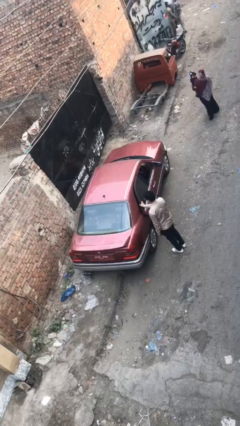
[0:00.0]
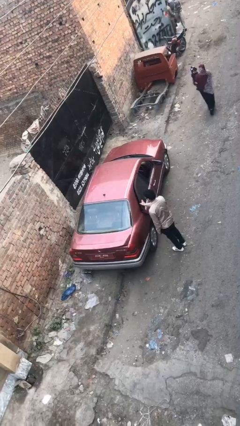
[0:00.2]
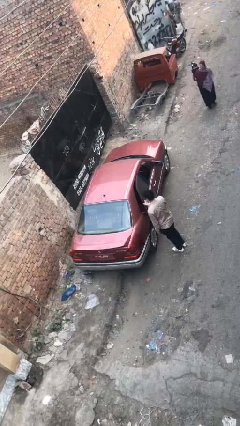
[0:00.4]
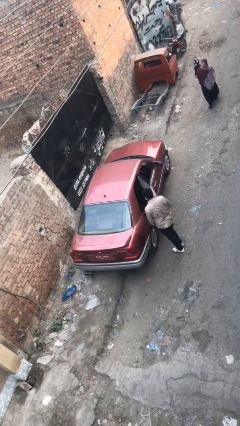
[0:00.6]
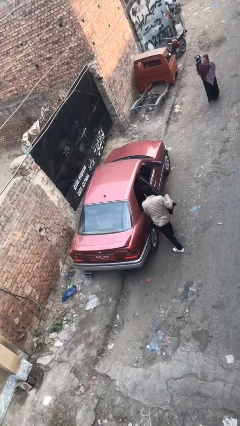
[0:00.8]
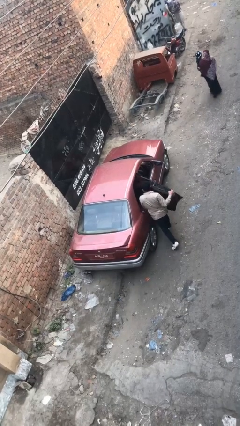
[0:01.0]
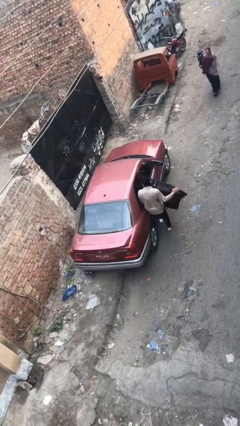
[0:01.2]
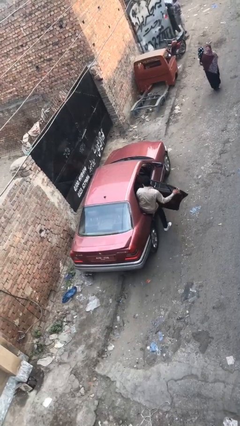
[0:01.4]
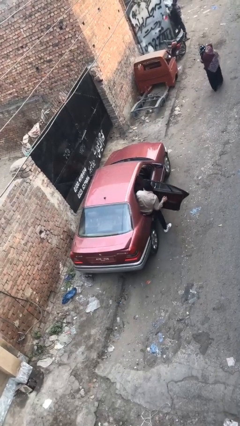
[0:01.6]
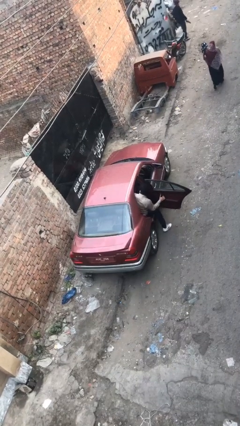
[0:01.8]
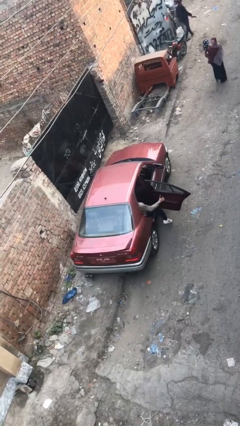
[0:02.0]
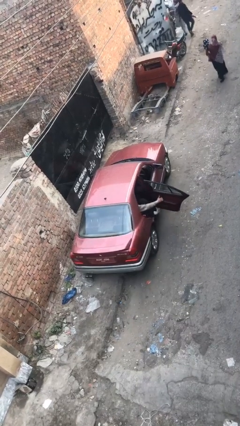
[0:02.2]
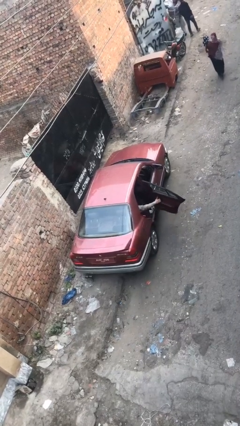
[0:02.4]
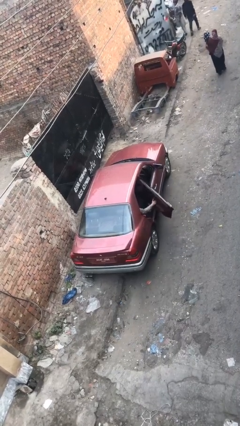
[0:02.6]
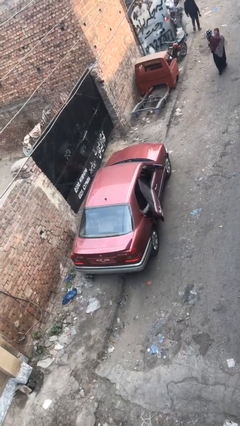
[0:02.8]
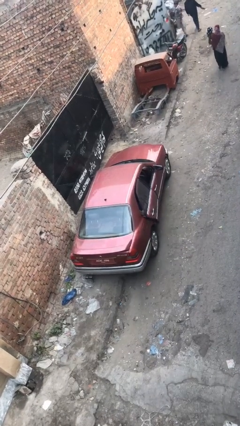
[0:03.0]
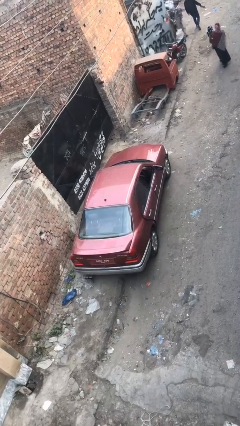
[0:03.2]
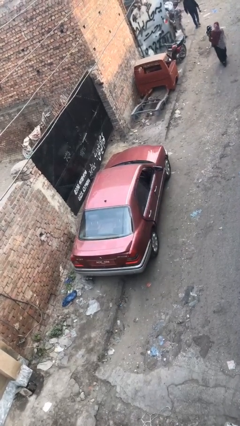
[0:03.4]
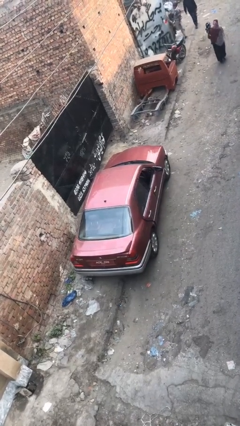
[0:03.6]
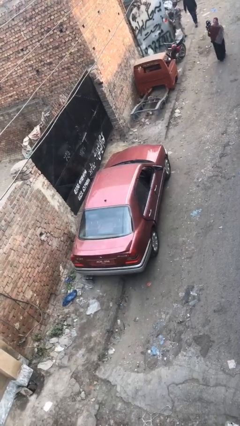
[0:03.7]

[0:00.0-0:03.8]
car picks up person

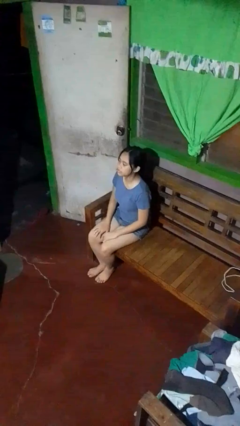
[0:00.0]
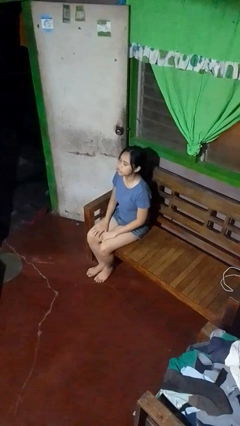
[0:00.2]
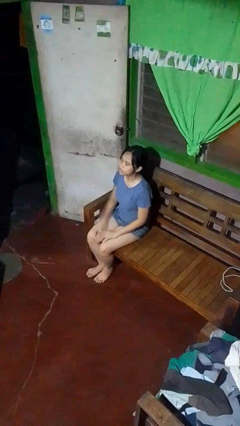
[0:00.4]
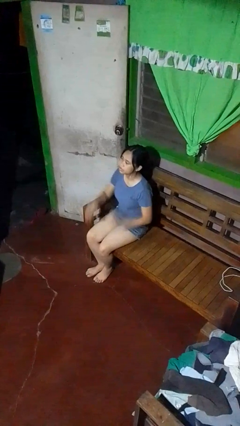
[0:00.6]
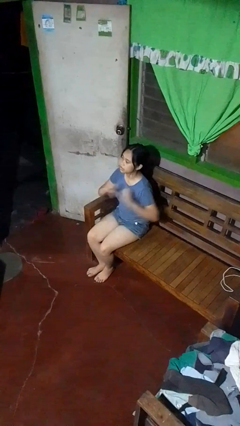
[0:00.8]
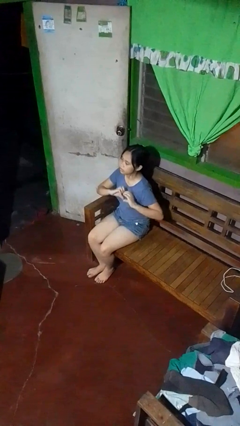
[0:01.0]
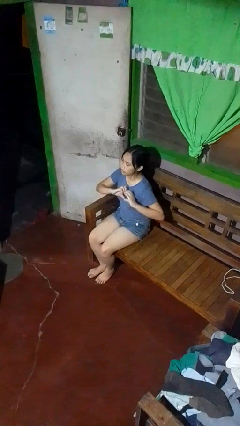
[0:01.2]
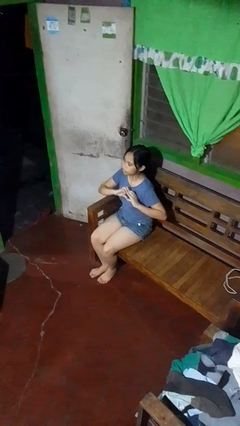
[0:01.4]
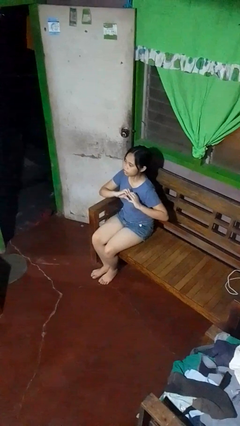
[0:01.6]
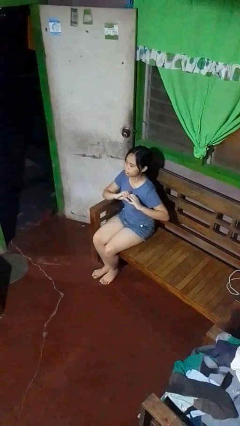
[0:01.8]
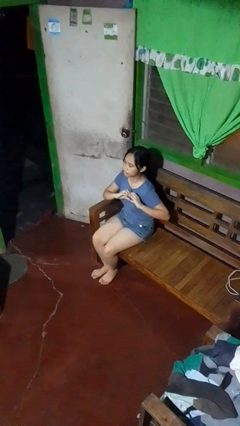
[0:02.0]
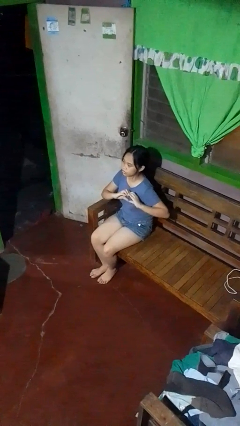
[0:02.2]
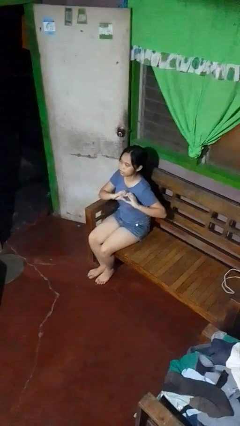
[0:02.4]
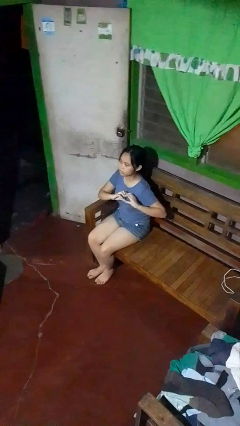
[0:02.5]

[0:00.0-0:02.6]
person gestures heart

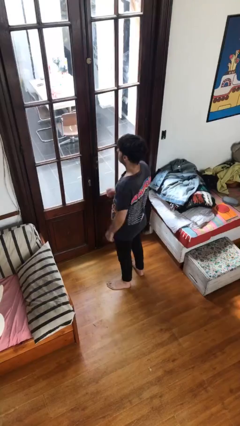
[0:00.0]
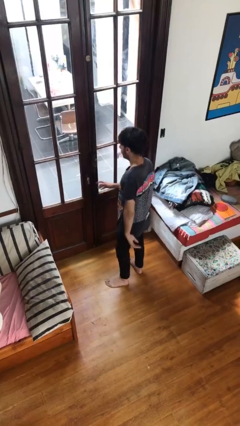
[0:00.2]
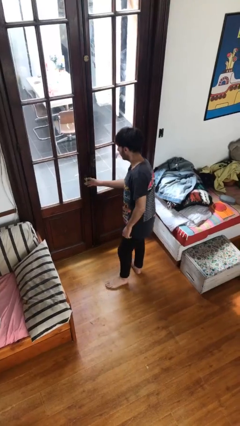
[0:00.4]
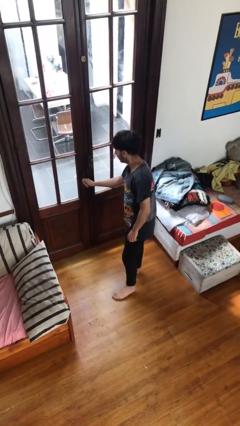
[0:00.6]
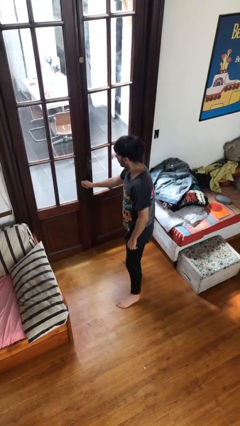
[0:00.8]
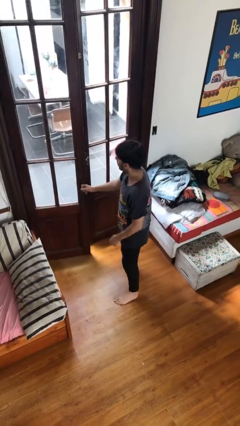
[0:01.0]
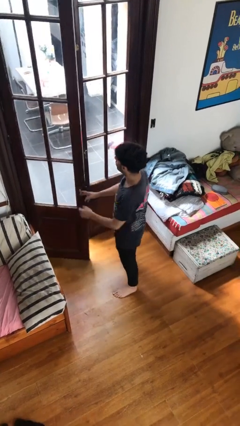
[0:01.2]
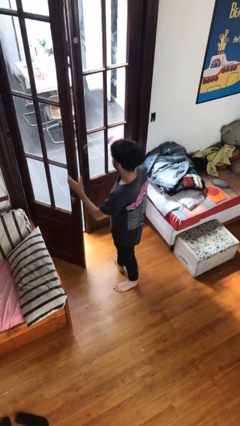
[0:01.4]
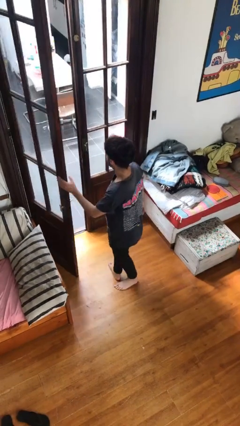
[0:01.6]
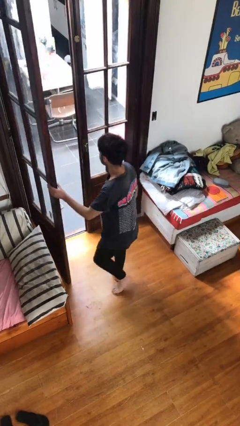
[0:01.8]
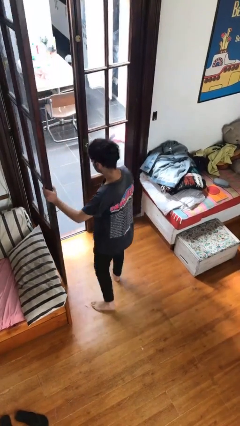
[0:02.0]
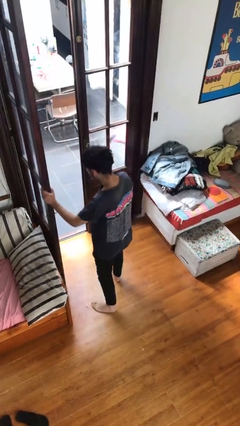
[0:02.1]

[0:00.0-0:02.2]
person opens facility door

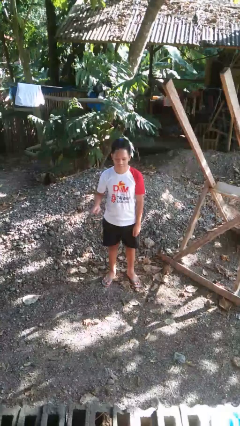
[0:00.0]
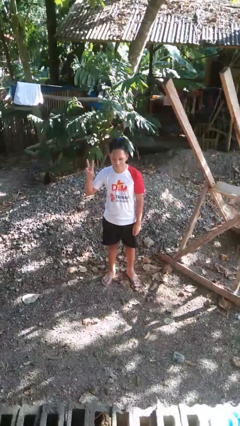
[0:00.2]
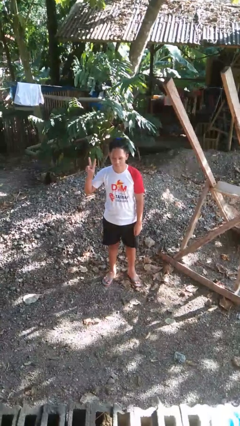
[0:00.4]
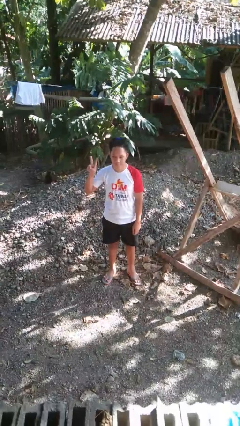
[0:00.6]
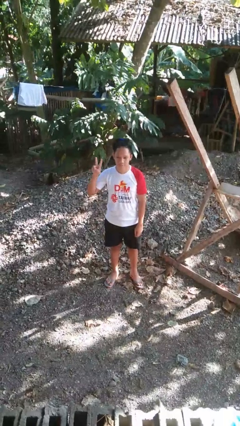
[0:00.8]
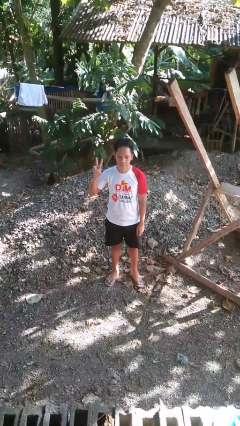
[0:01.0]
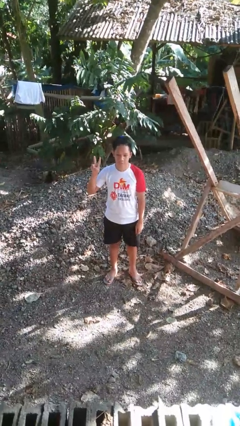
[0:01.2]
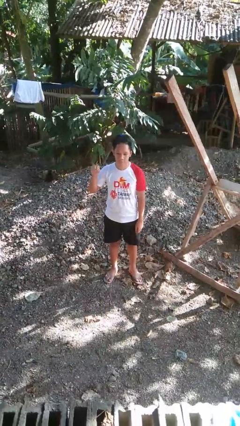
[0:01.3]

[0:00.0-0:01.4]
person gestures peace

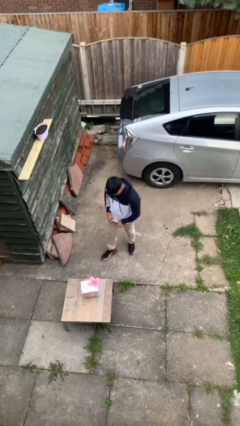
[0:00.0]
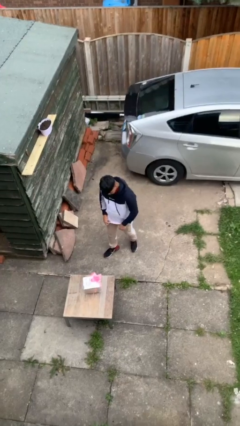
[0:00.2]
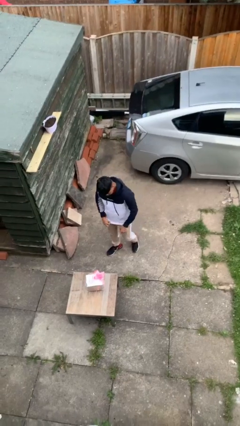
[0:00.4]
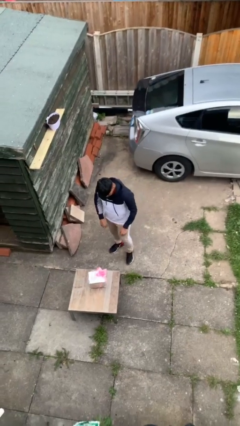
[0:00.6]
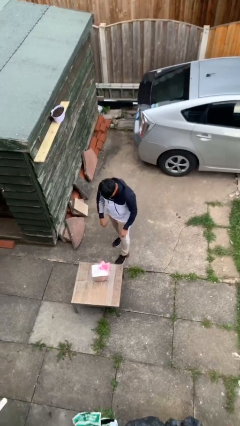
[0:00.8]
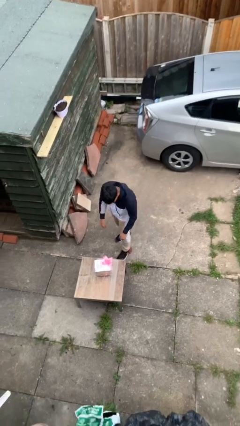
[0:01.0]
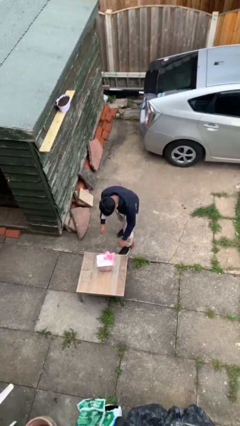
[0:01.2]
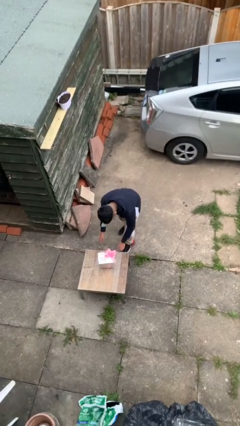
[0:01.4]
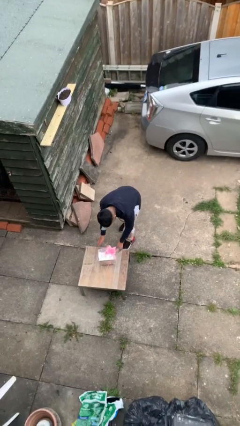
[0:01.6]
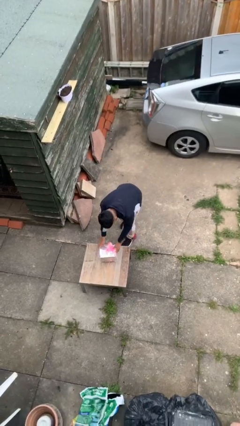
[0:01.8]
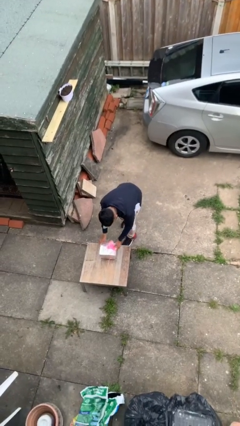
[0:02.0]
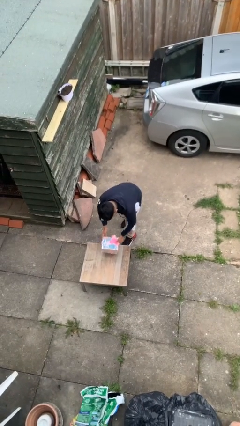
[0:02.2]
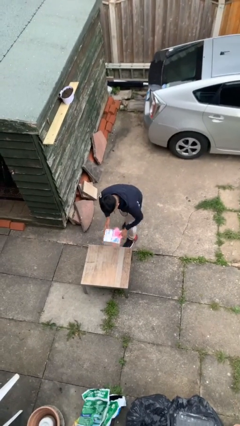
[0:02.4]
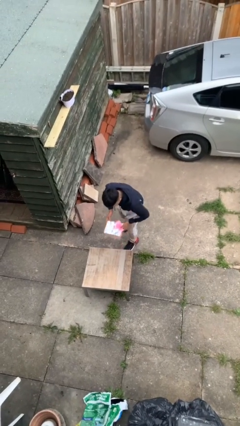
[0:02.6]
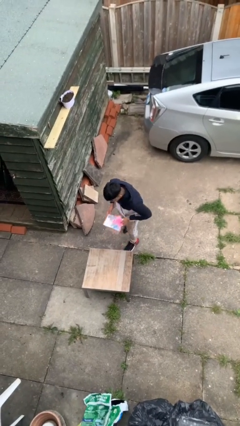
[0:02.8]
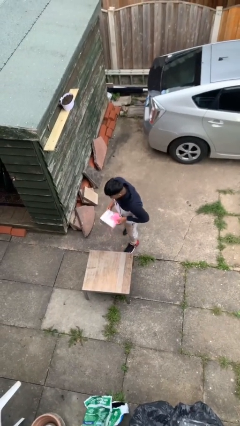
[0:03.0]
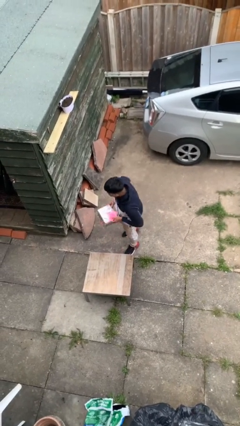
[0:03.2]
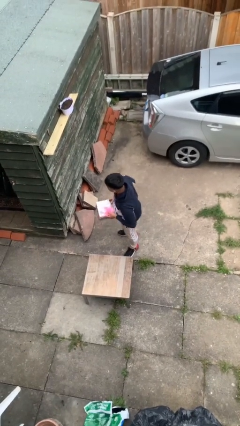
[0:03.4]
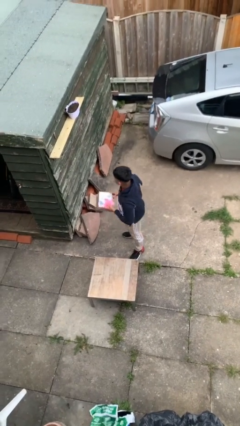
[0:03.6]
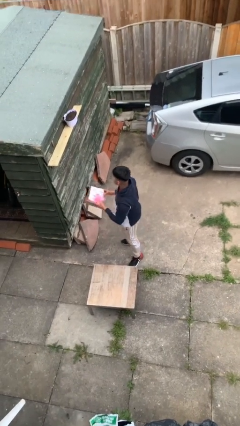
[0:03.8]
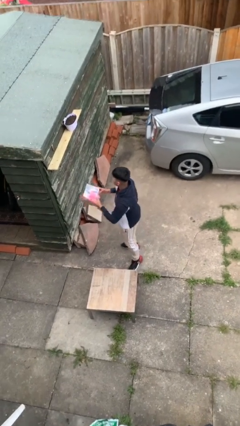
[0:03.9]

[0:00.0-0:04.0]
person picks up object from table

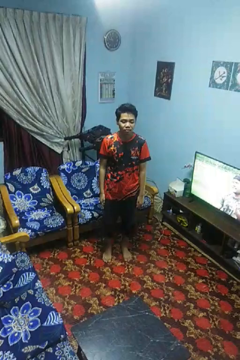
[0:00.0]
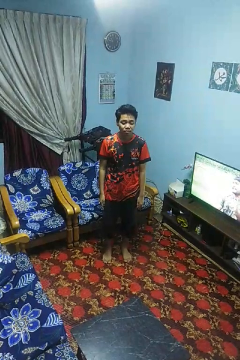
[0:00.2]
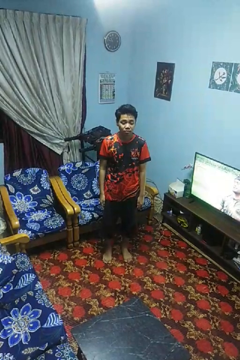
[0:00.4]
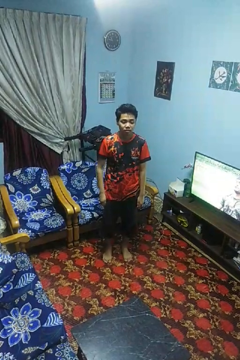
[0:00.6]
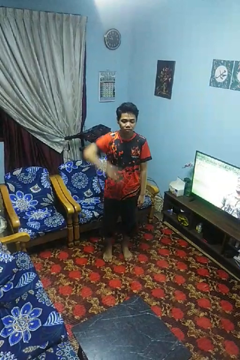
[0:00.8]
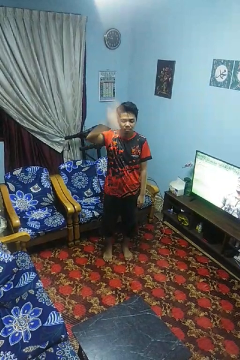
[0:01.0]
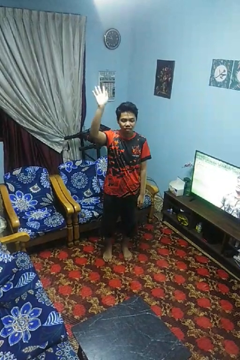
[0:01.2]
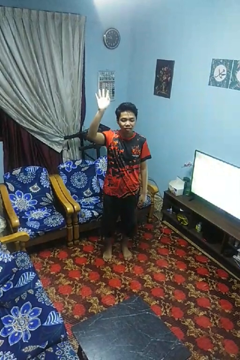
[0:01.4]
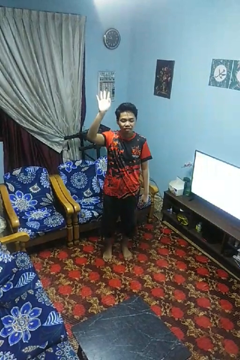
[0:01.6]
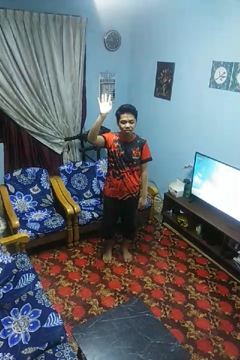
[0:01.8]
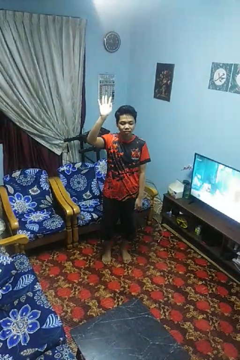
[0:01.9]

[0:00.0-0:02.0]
person gestures swipe up

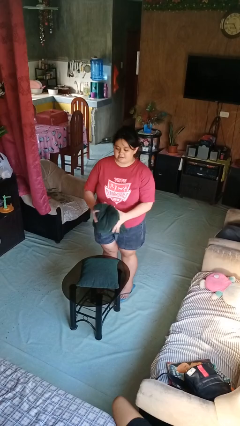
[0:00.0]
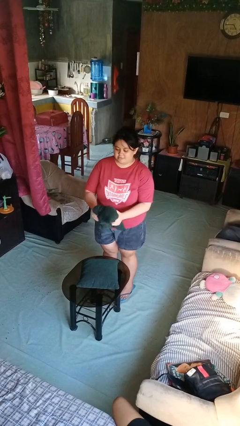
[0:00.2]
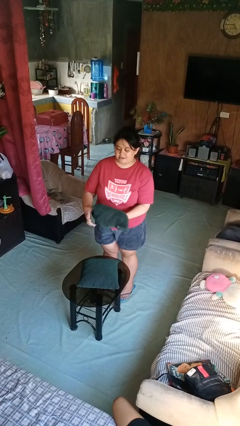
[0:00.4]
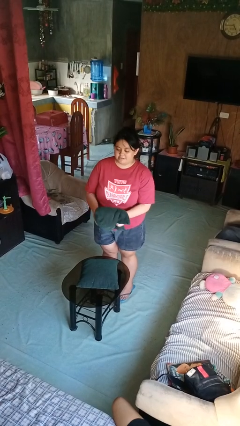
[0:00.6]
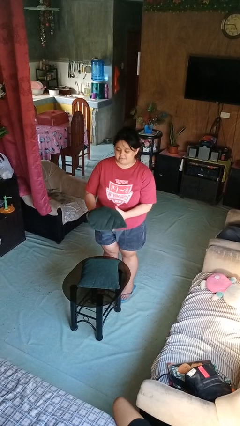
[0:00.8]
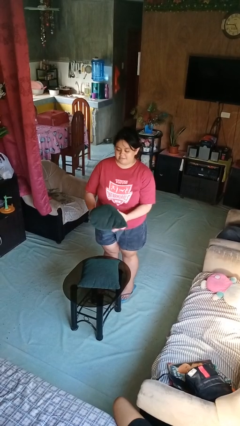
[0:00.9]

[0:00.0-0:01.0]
person squeezes object

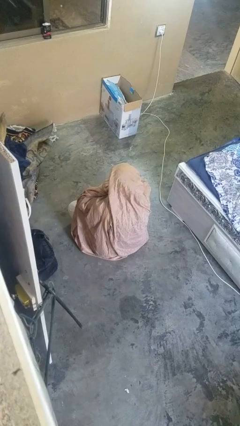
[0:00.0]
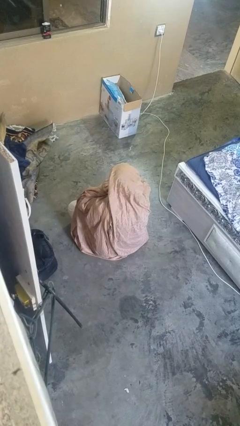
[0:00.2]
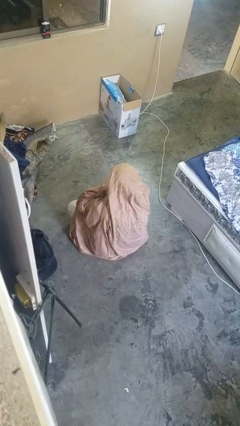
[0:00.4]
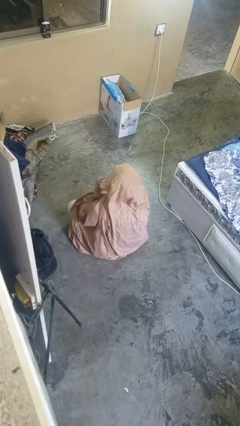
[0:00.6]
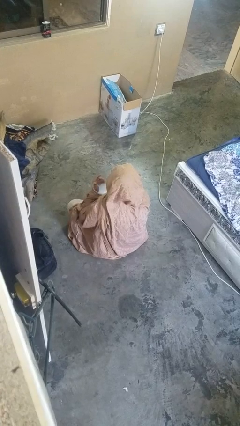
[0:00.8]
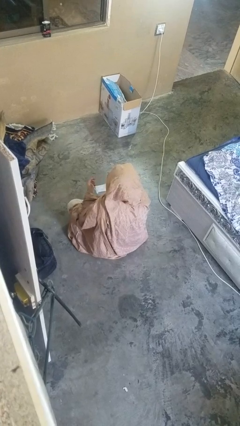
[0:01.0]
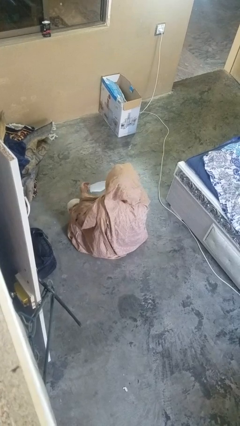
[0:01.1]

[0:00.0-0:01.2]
person takes off facemask
